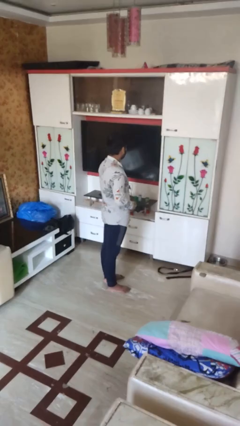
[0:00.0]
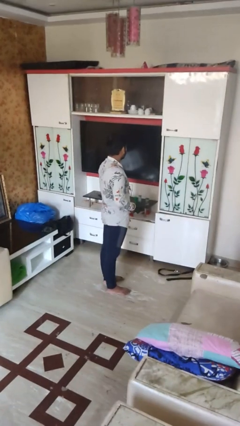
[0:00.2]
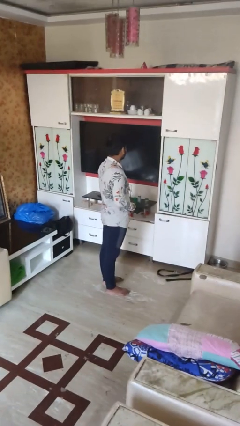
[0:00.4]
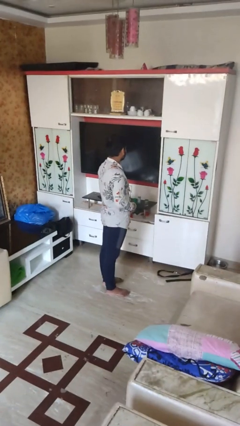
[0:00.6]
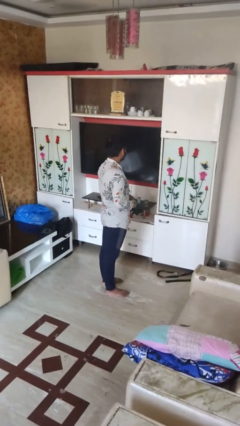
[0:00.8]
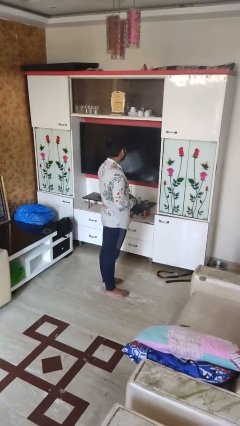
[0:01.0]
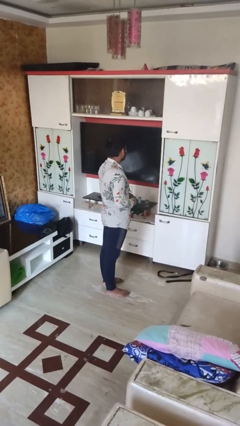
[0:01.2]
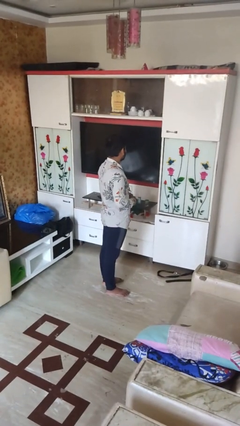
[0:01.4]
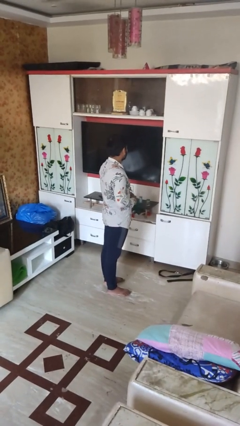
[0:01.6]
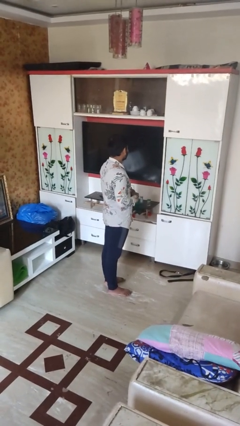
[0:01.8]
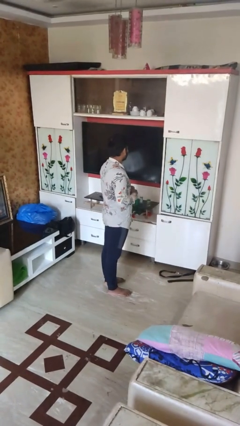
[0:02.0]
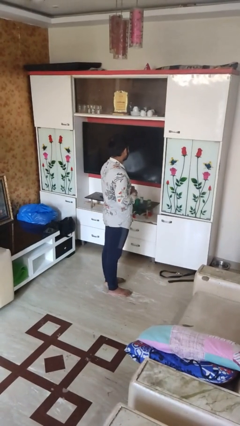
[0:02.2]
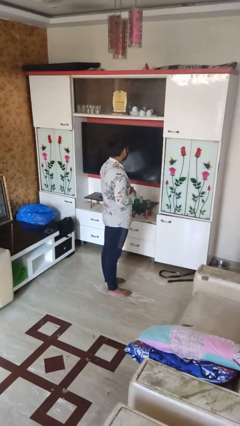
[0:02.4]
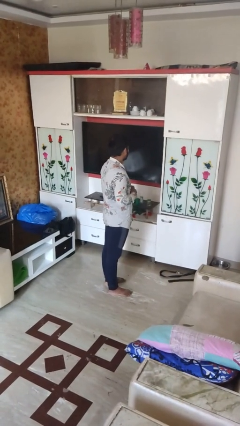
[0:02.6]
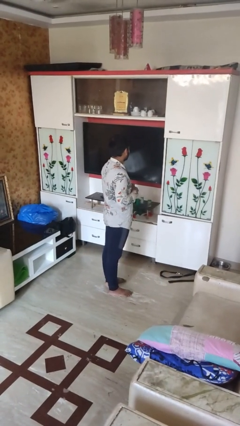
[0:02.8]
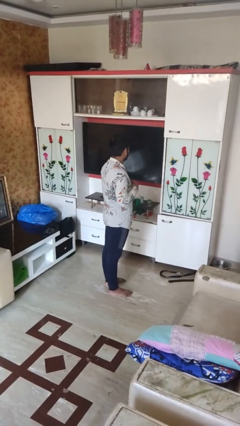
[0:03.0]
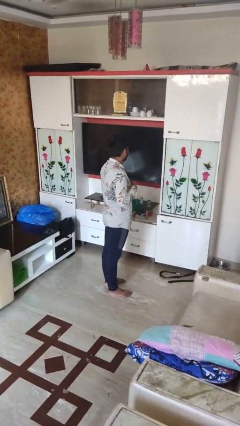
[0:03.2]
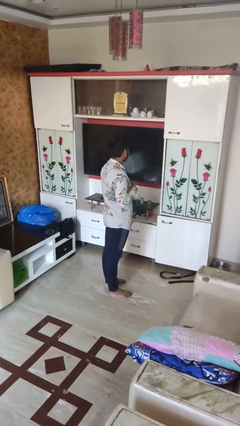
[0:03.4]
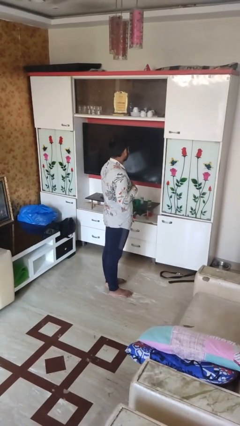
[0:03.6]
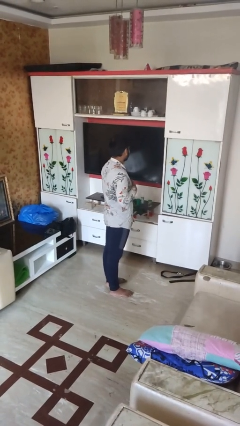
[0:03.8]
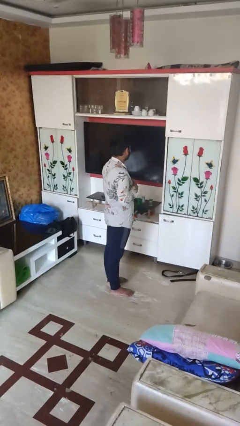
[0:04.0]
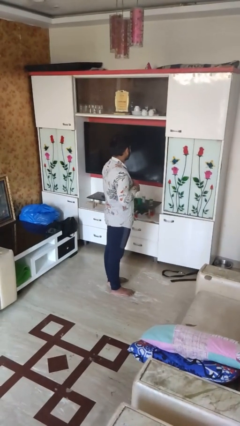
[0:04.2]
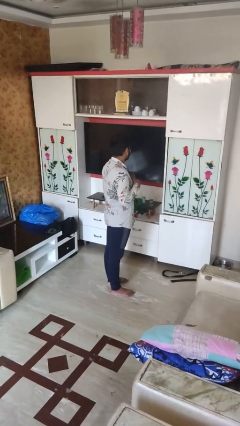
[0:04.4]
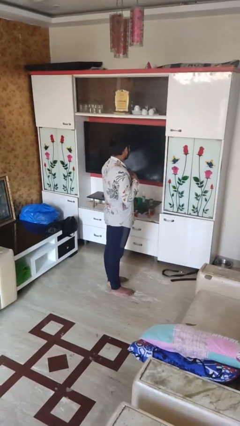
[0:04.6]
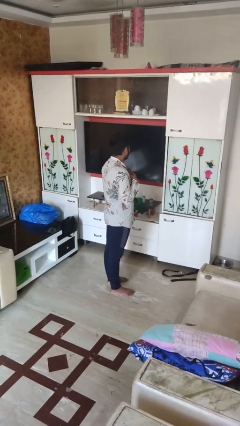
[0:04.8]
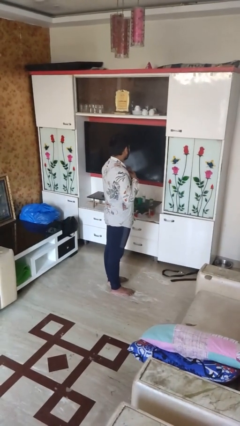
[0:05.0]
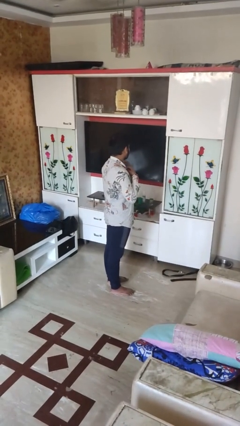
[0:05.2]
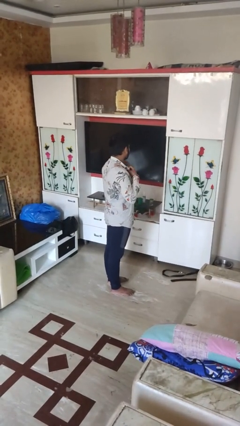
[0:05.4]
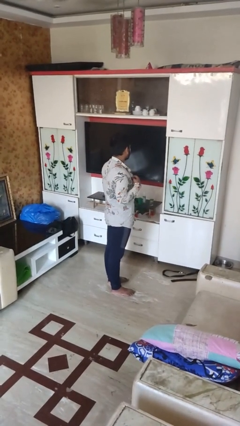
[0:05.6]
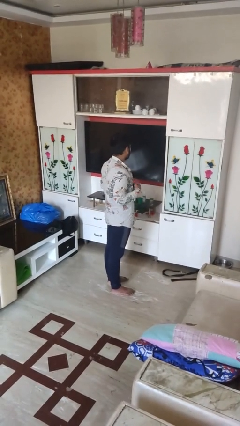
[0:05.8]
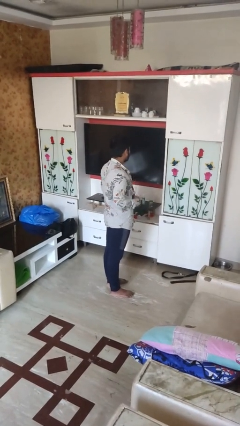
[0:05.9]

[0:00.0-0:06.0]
person unbuttons shirt

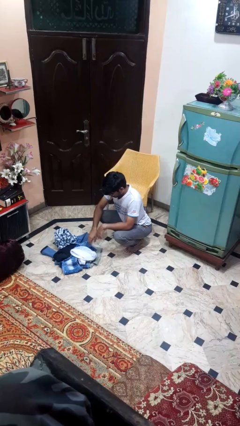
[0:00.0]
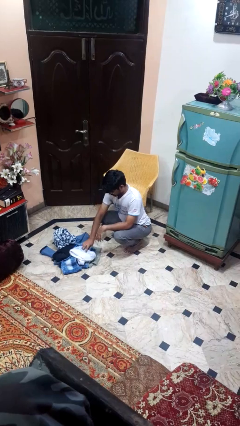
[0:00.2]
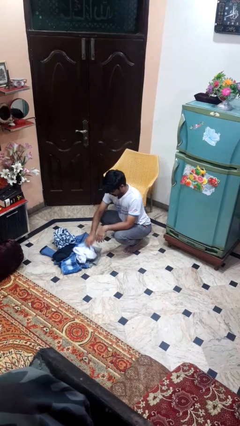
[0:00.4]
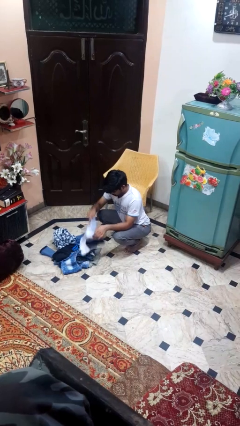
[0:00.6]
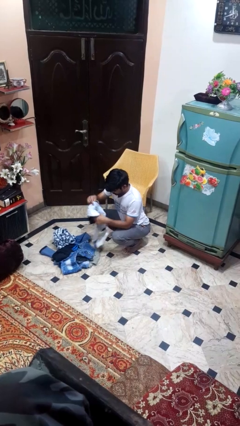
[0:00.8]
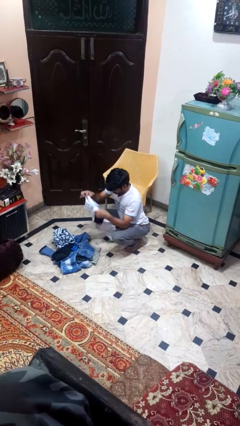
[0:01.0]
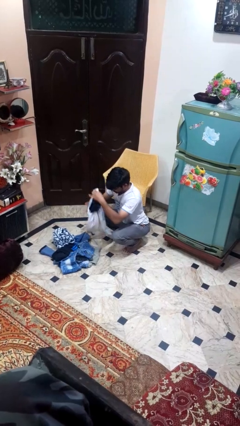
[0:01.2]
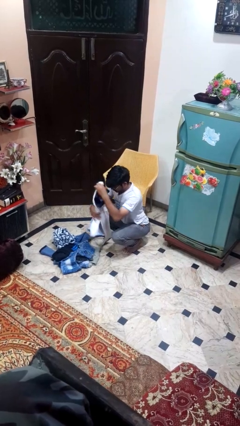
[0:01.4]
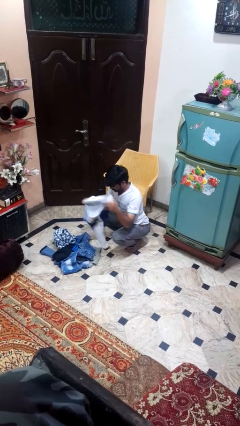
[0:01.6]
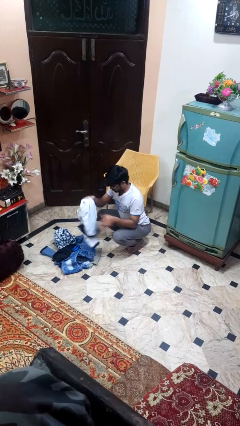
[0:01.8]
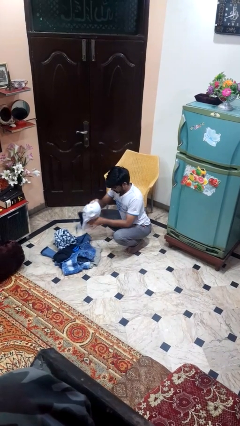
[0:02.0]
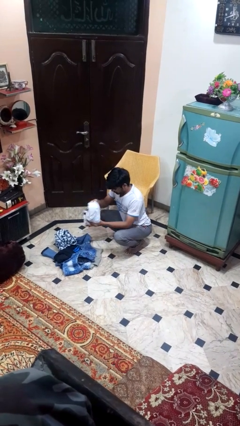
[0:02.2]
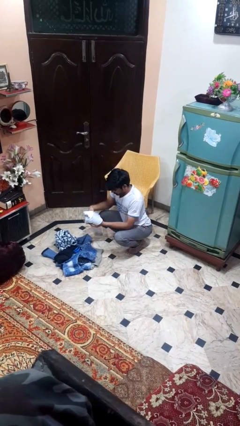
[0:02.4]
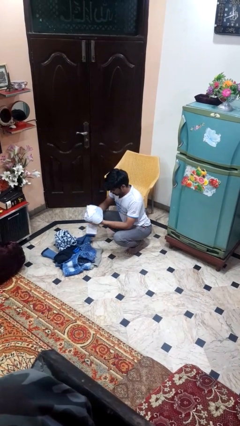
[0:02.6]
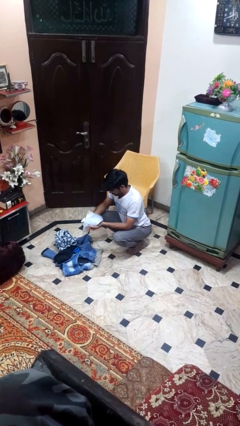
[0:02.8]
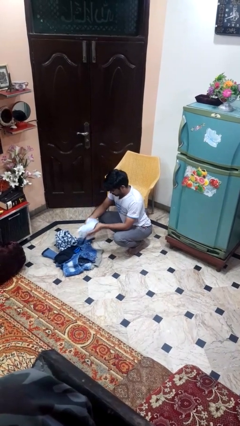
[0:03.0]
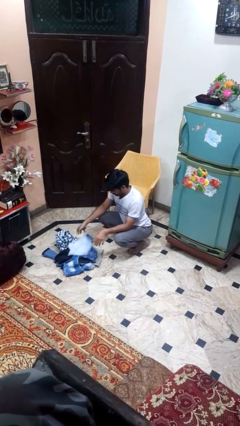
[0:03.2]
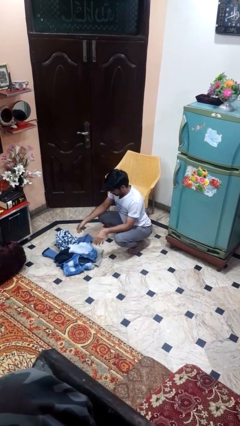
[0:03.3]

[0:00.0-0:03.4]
person folds pants

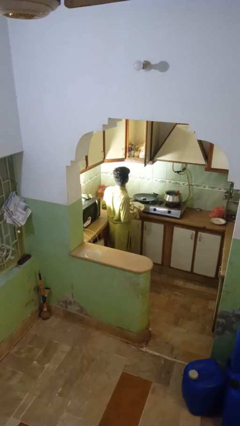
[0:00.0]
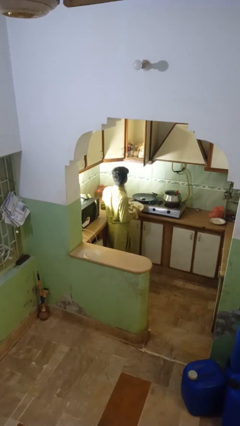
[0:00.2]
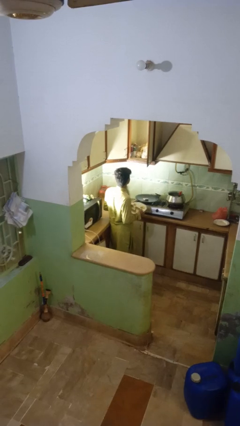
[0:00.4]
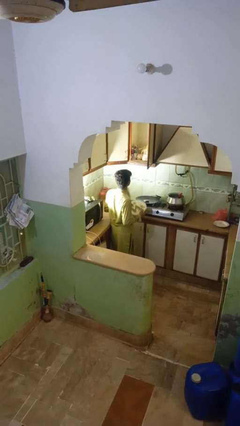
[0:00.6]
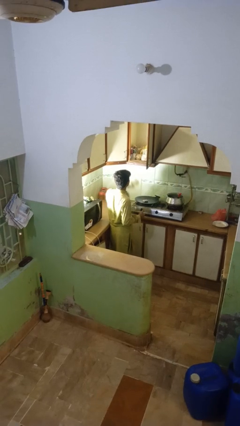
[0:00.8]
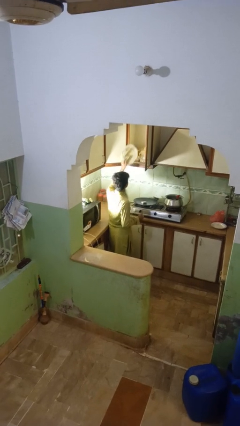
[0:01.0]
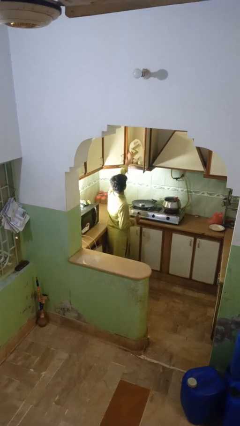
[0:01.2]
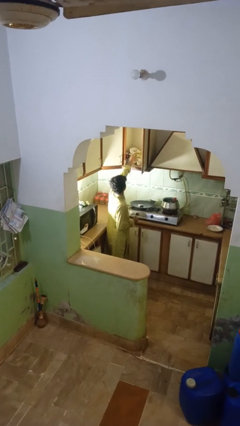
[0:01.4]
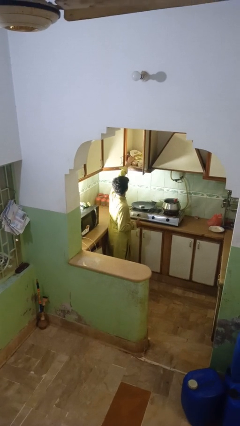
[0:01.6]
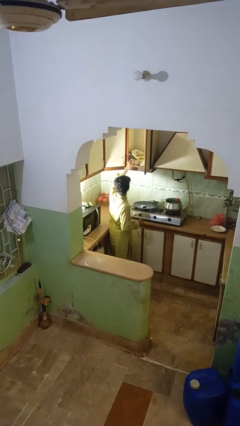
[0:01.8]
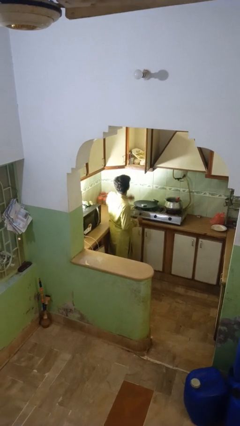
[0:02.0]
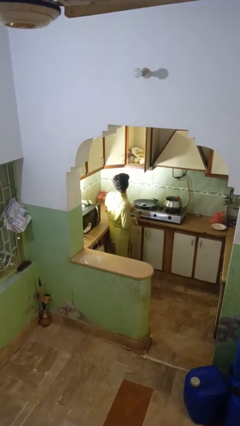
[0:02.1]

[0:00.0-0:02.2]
person puts object in cabinet

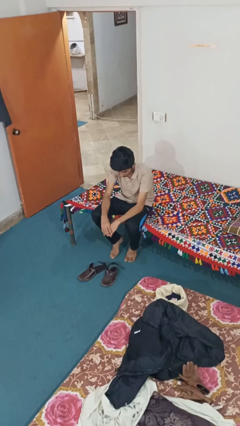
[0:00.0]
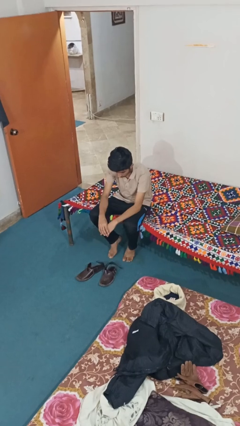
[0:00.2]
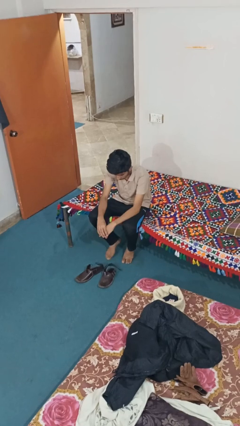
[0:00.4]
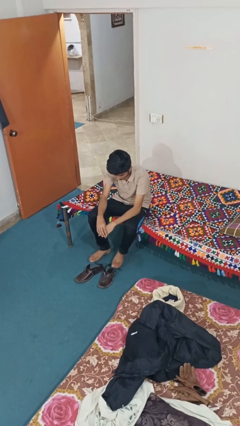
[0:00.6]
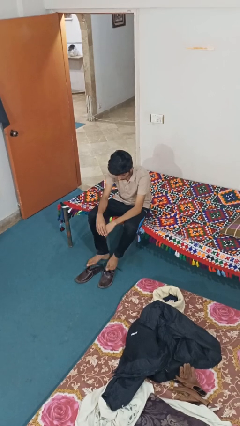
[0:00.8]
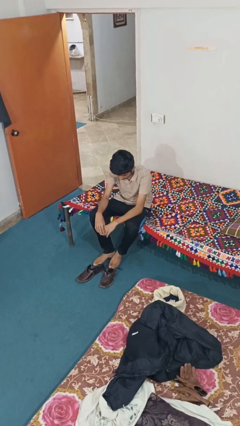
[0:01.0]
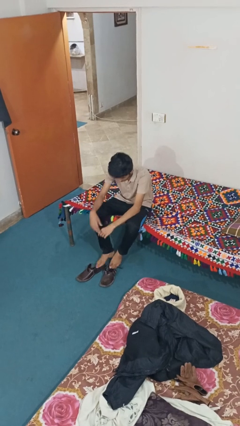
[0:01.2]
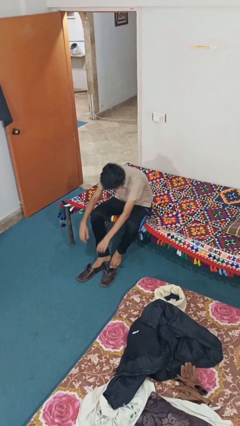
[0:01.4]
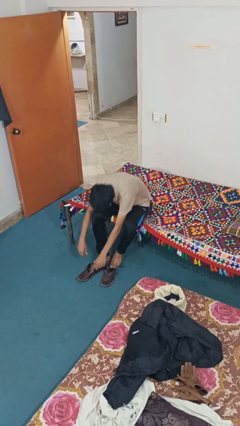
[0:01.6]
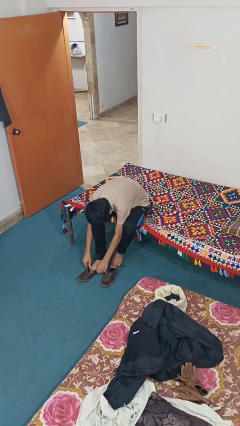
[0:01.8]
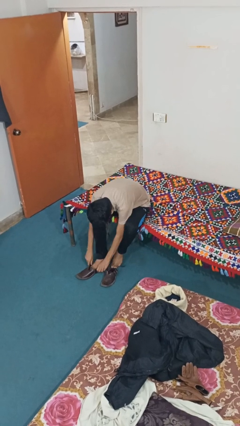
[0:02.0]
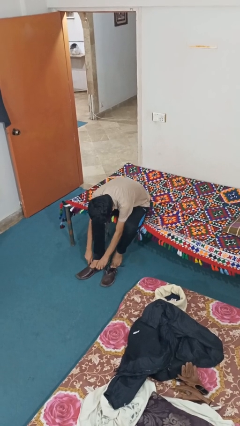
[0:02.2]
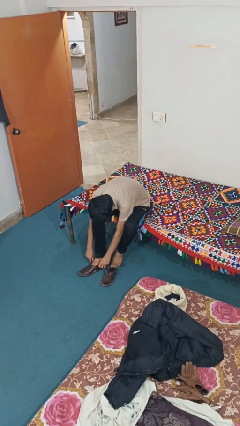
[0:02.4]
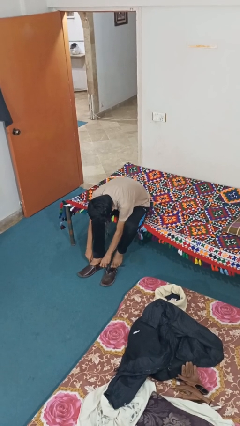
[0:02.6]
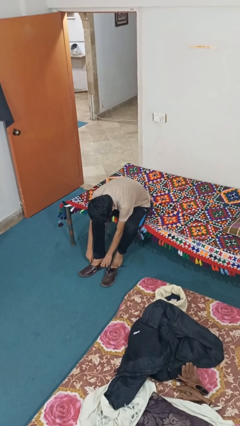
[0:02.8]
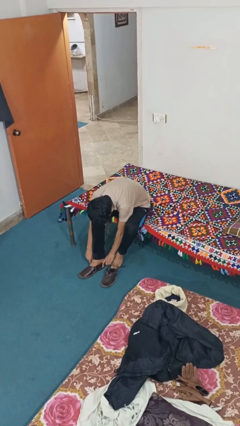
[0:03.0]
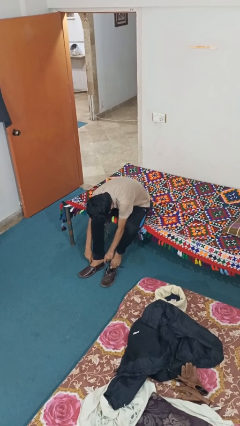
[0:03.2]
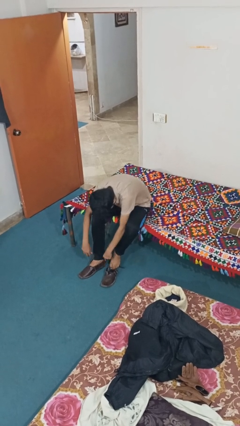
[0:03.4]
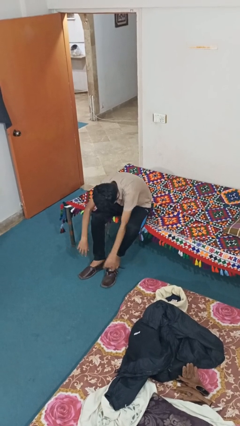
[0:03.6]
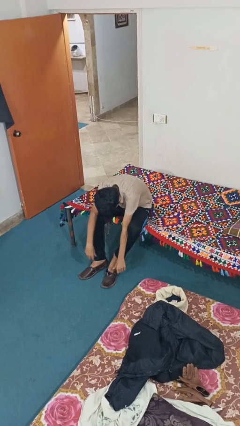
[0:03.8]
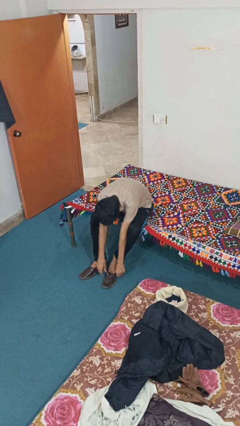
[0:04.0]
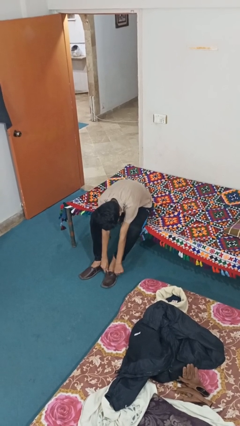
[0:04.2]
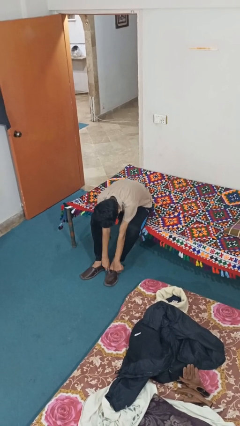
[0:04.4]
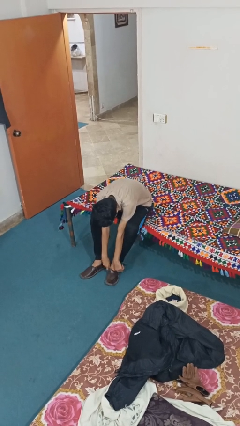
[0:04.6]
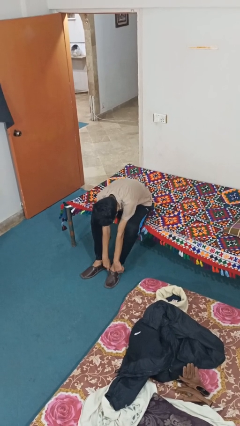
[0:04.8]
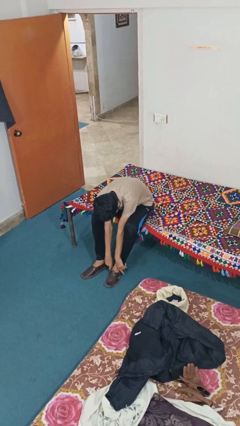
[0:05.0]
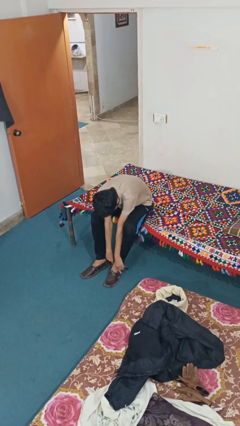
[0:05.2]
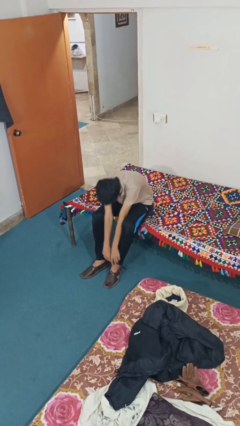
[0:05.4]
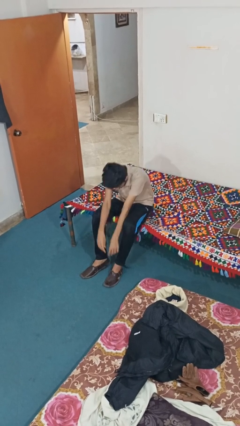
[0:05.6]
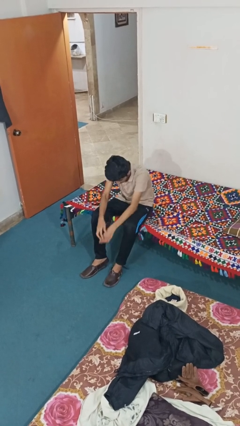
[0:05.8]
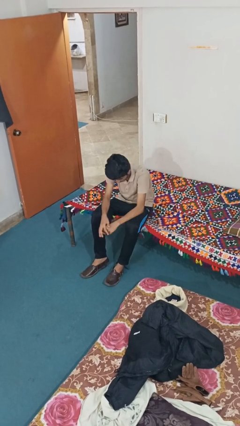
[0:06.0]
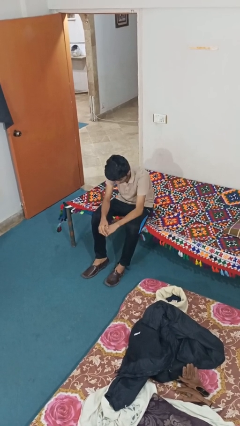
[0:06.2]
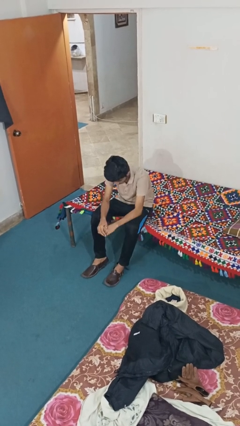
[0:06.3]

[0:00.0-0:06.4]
person puts on shoes
